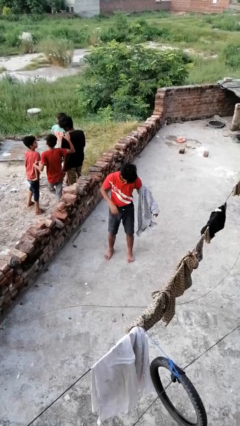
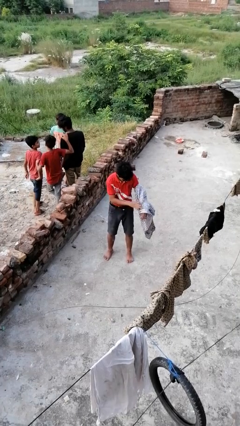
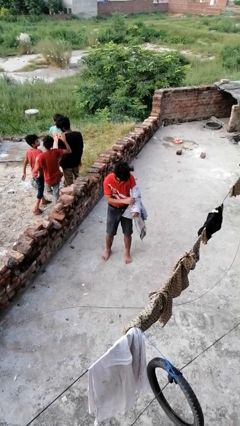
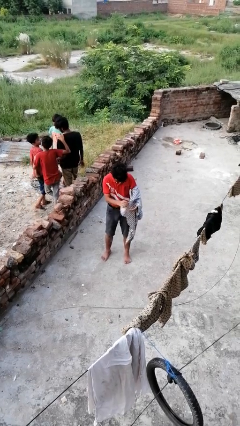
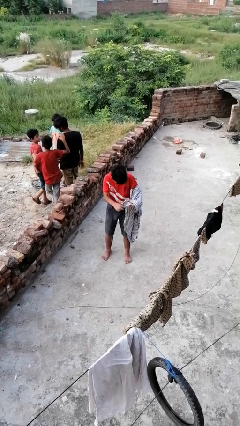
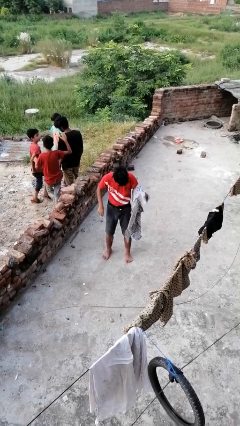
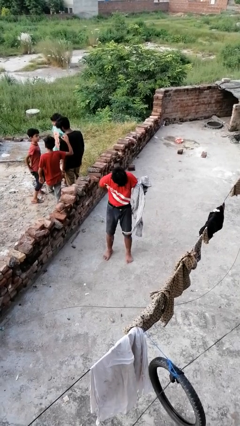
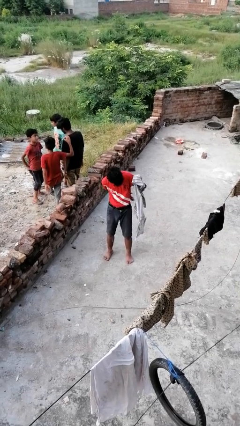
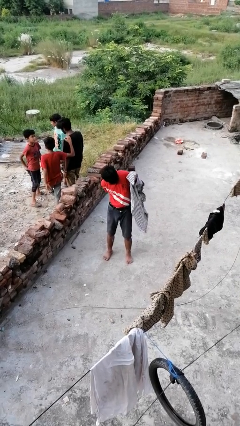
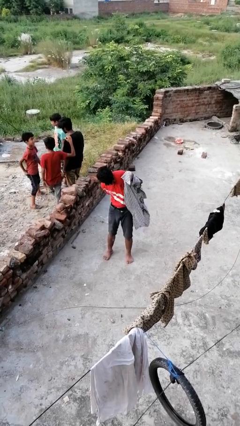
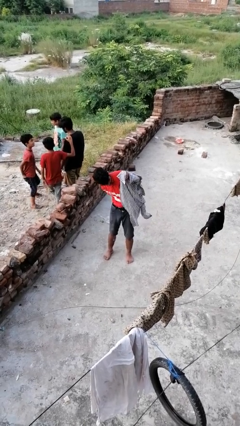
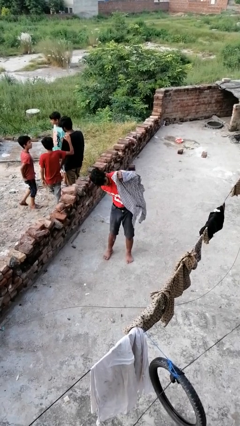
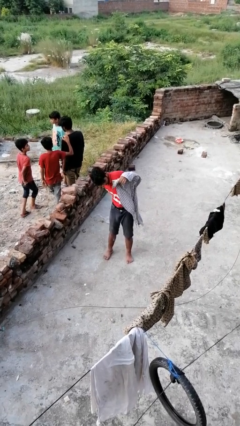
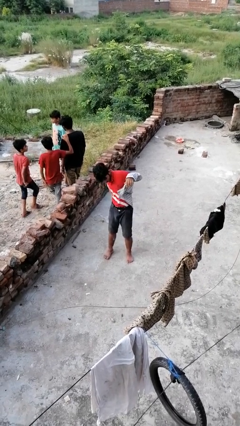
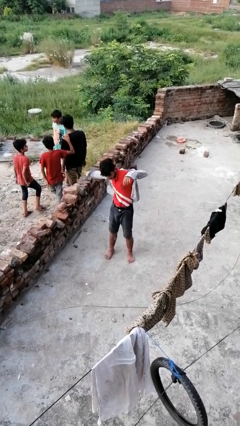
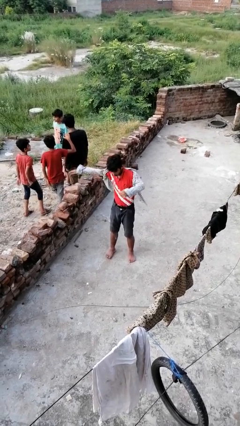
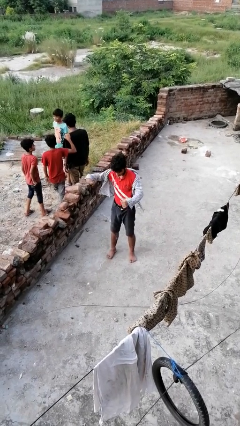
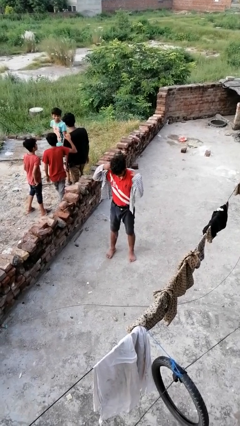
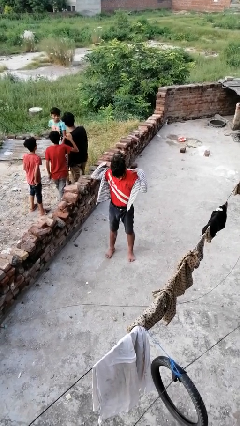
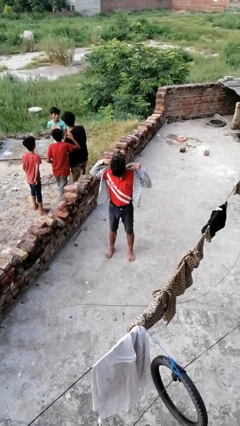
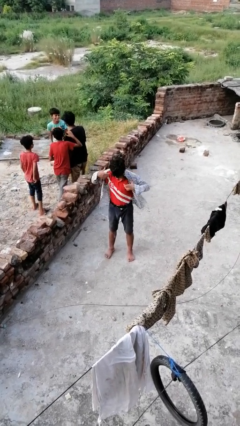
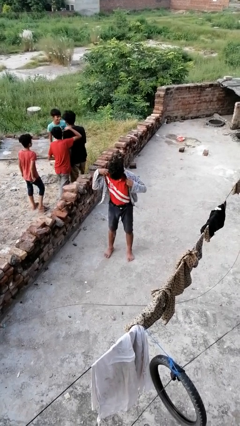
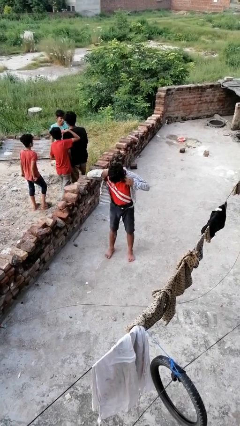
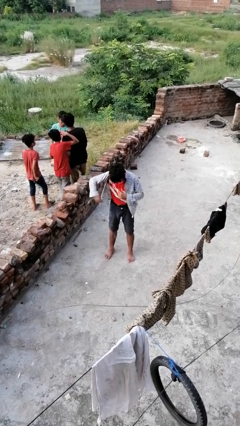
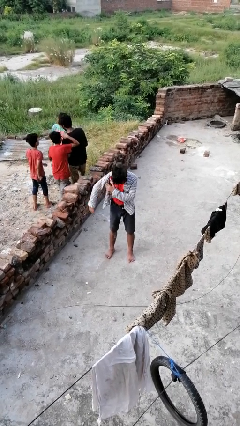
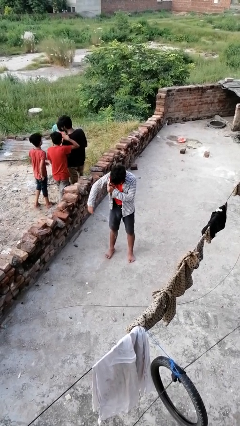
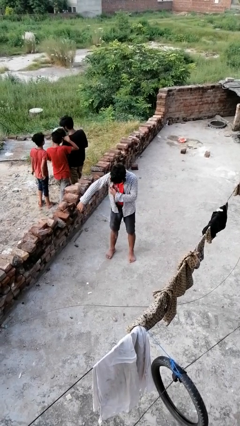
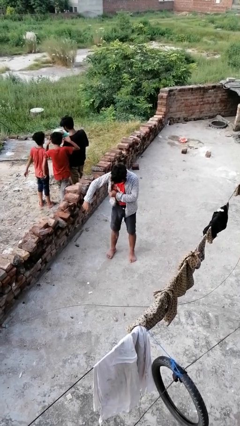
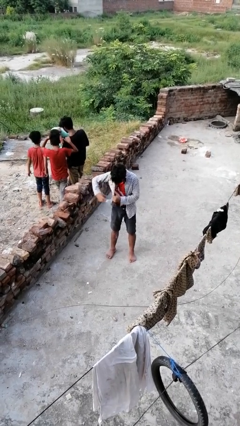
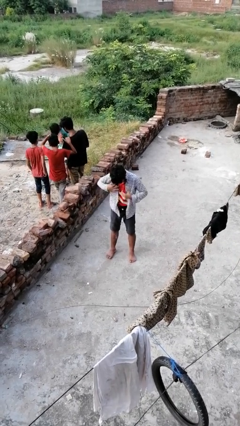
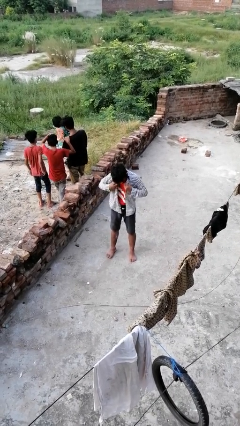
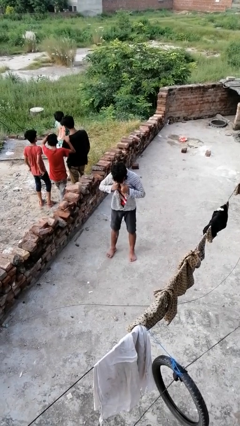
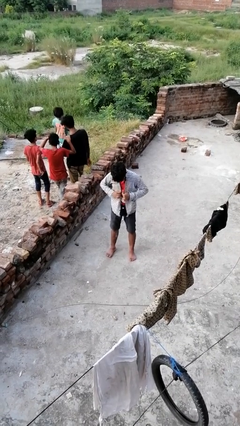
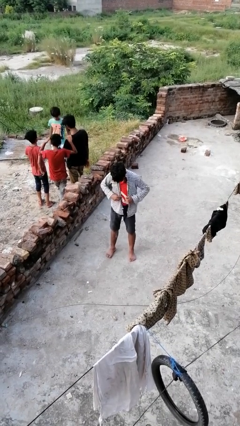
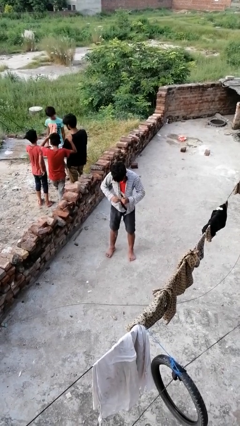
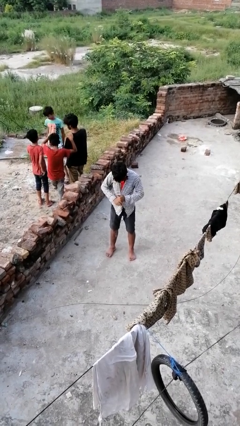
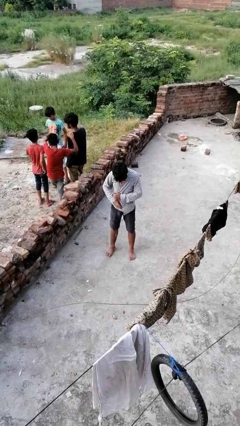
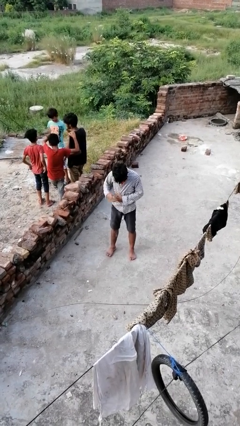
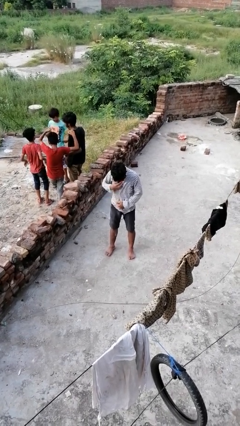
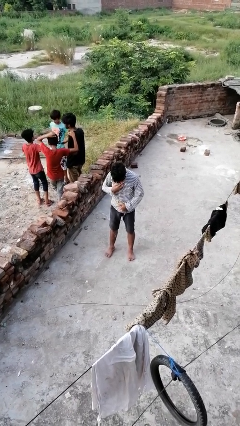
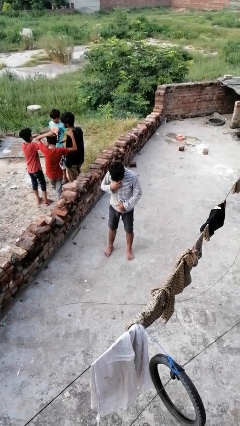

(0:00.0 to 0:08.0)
person puts on shirt

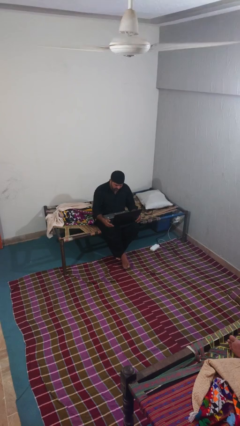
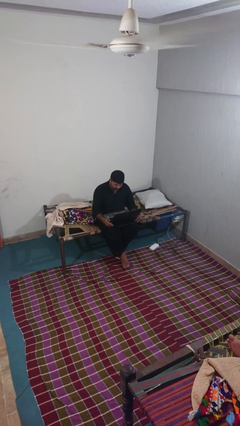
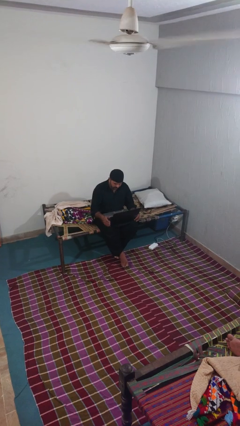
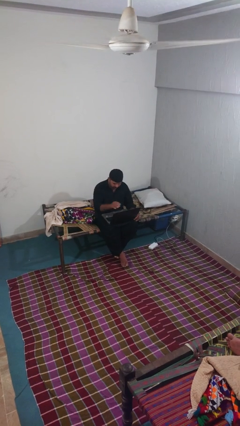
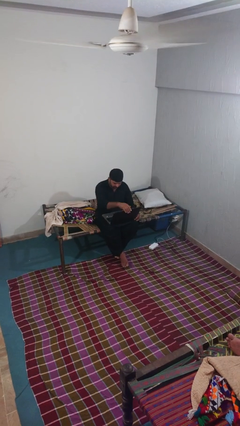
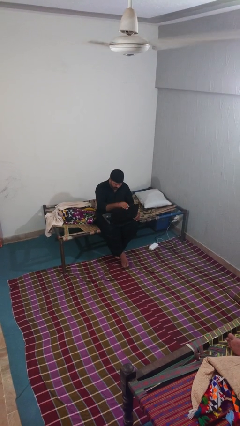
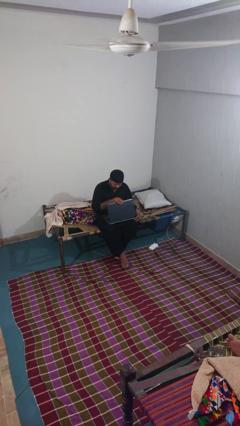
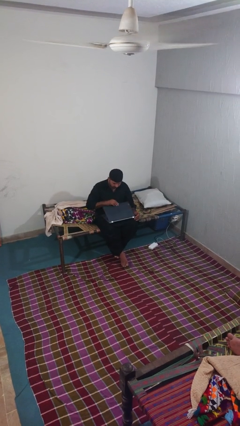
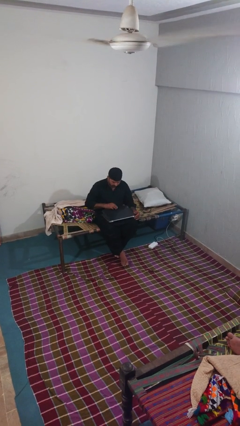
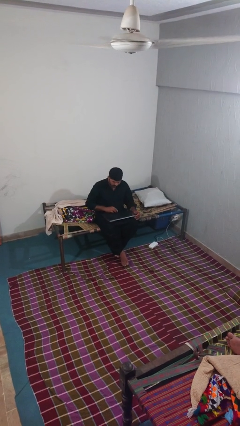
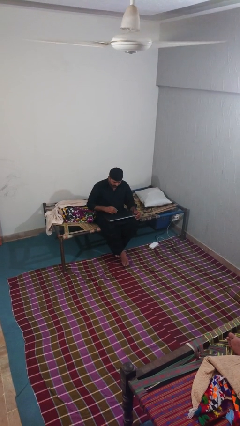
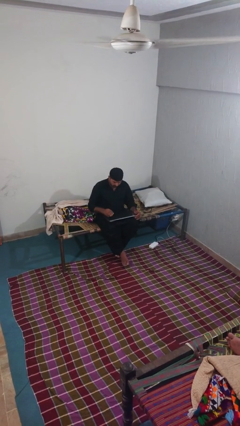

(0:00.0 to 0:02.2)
person closes laptop

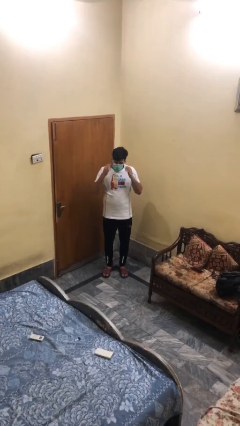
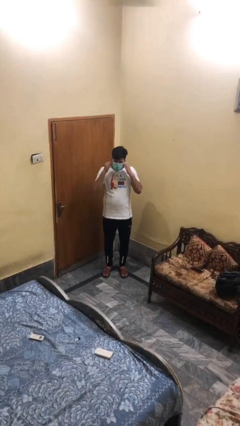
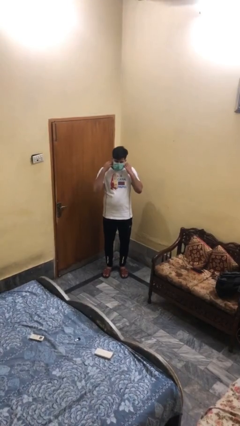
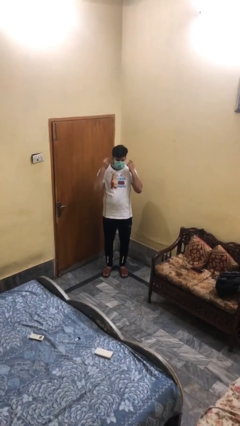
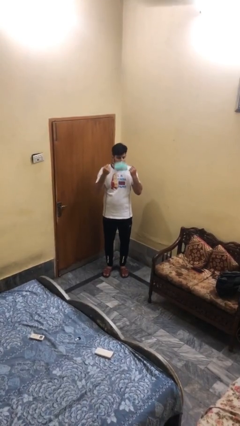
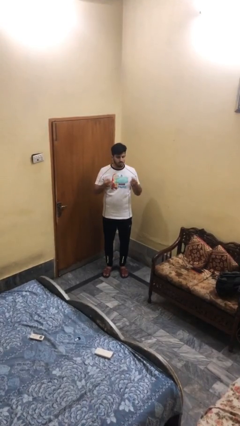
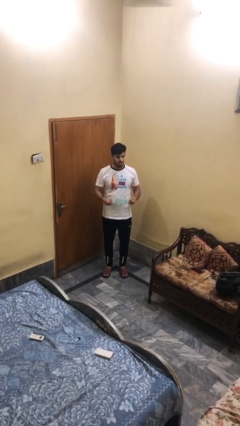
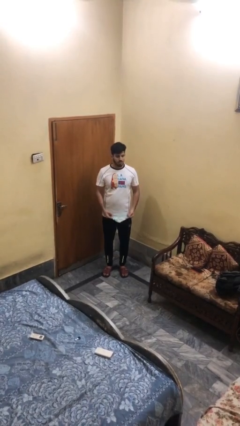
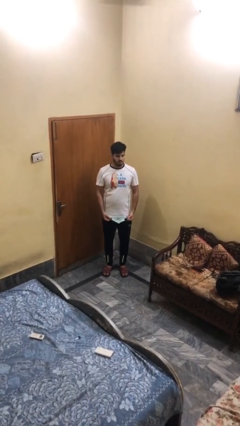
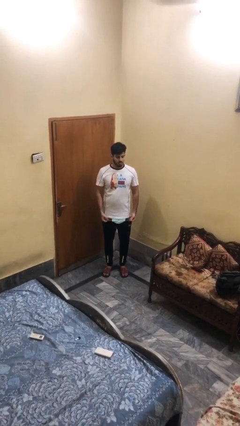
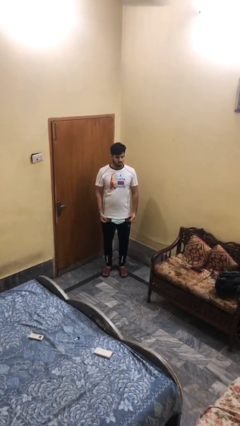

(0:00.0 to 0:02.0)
person takes off facemask

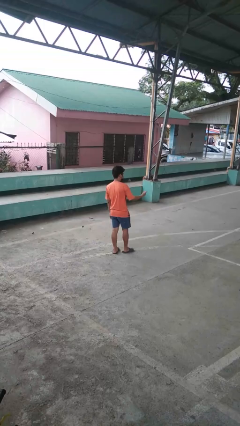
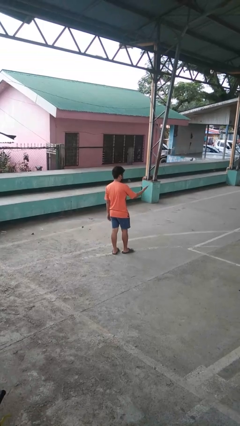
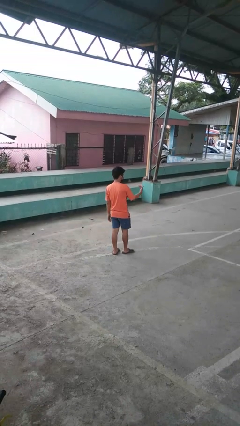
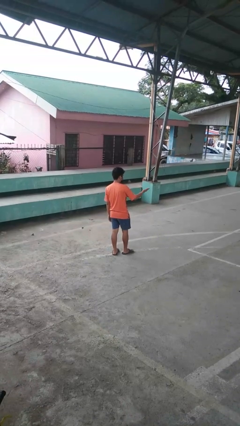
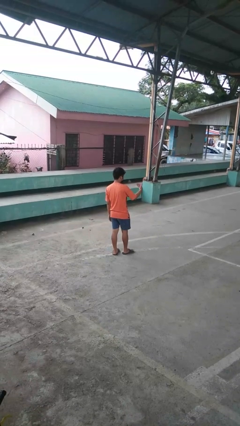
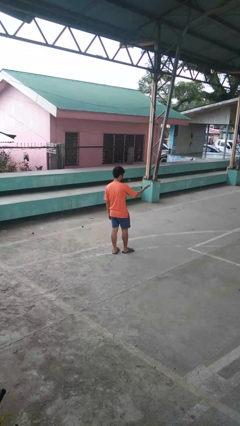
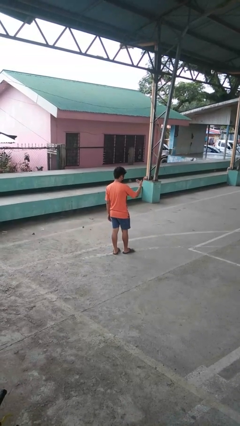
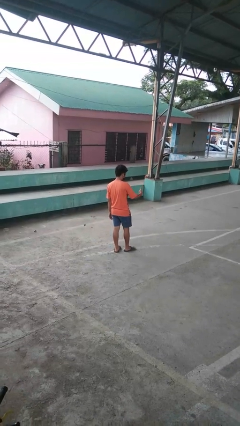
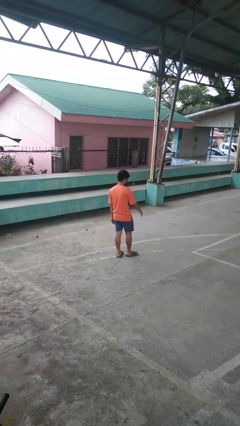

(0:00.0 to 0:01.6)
person gestures come here

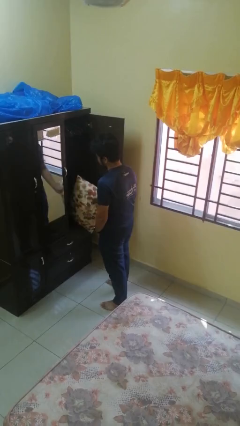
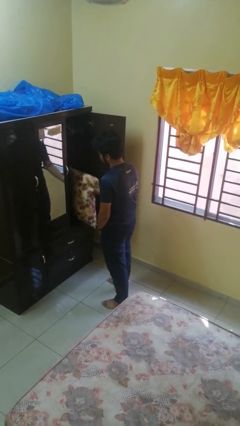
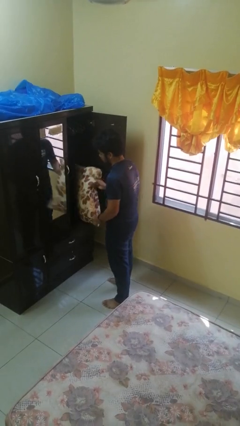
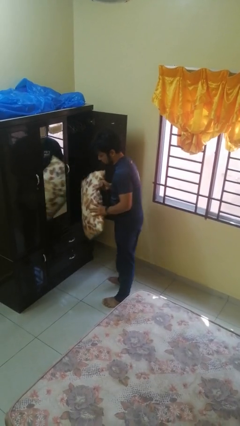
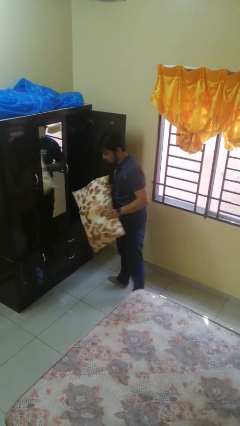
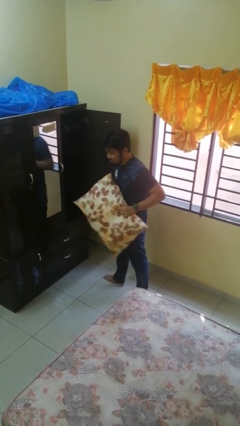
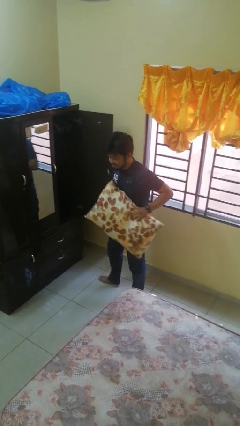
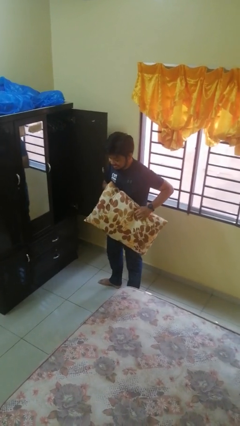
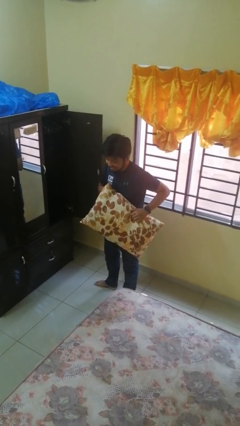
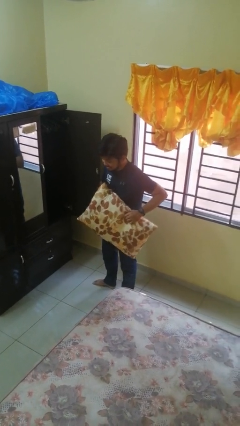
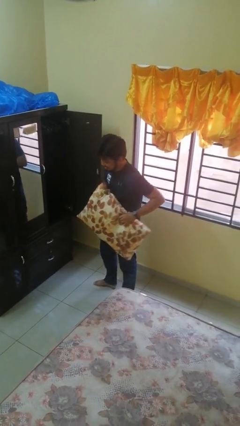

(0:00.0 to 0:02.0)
person picks up object from cabinet

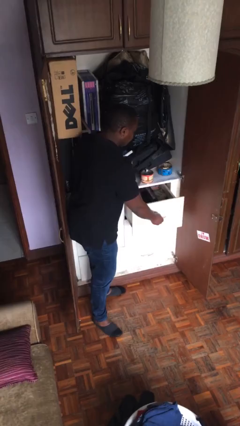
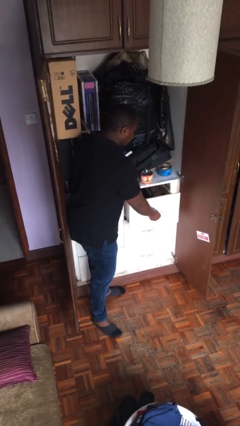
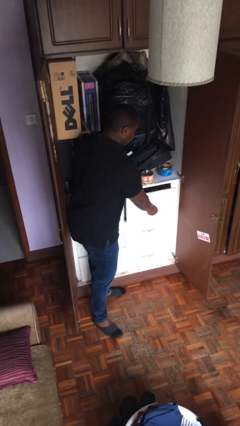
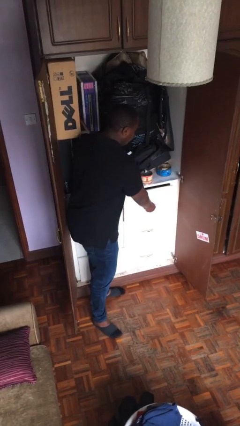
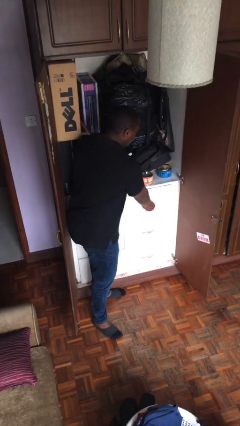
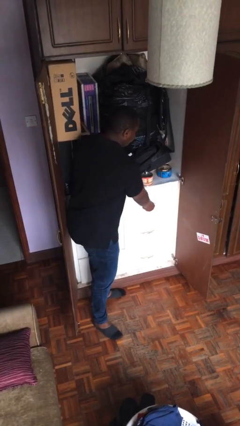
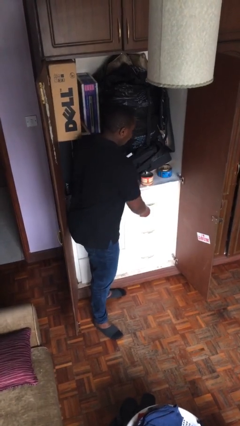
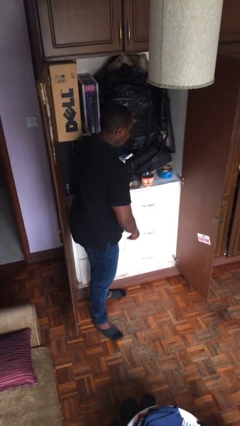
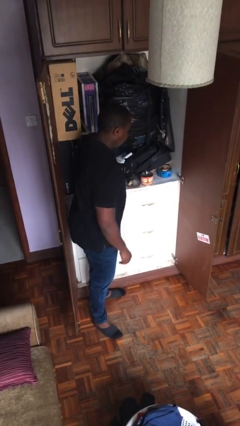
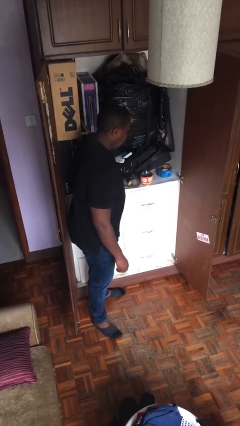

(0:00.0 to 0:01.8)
person closes dresser drawer
